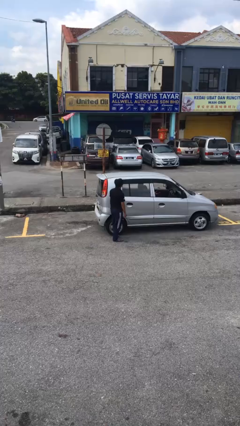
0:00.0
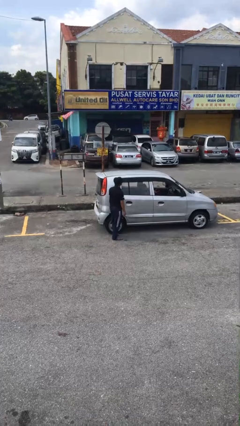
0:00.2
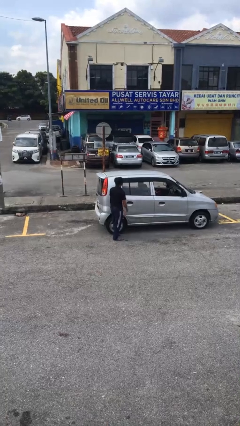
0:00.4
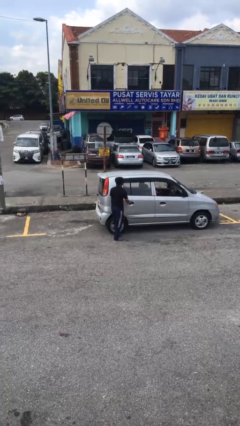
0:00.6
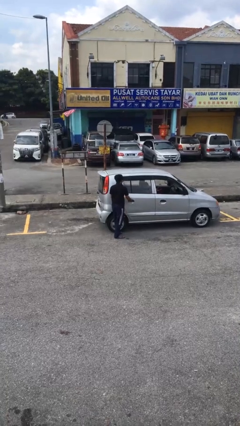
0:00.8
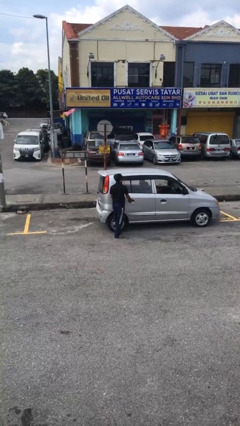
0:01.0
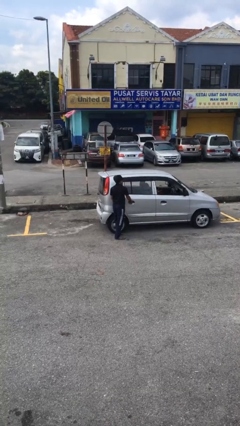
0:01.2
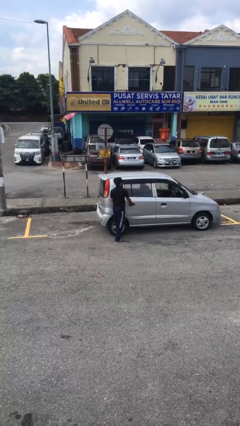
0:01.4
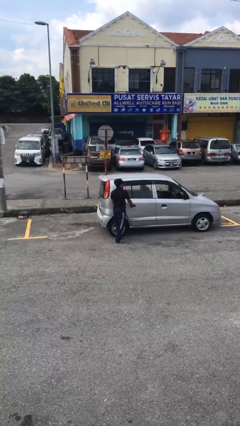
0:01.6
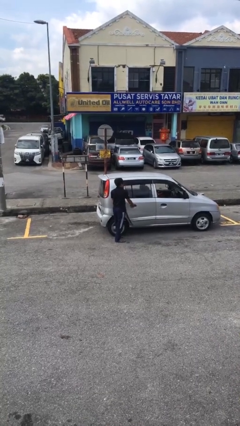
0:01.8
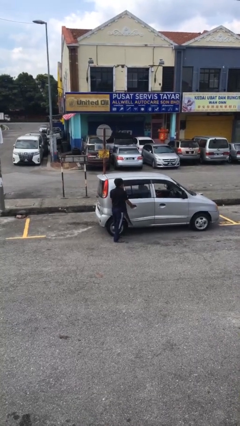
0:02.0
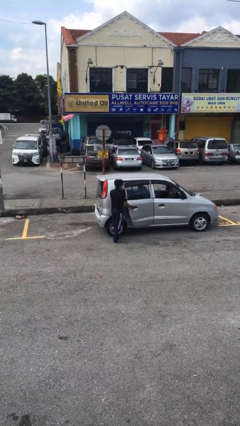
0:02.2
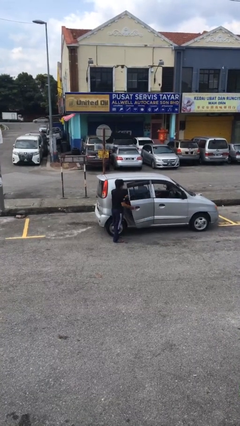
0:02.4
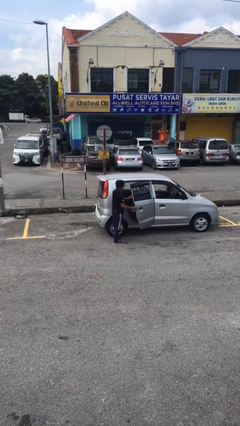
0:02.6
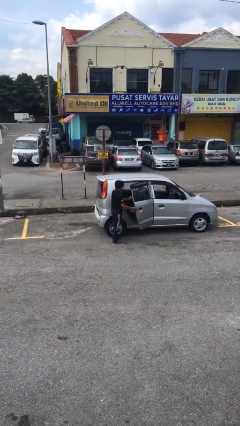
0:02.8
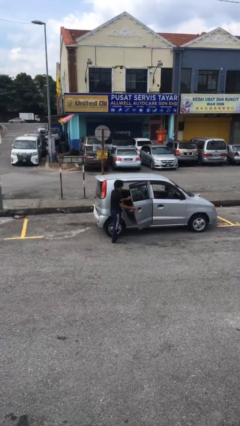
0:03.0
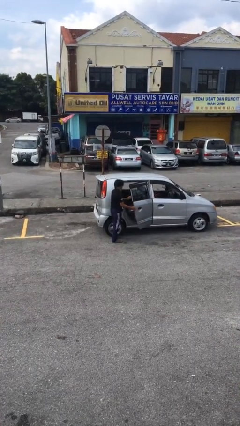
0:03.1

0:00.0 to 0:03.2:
person opens car door

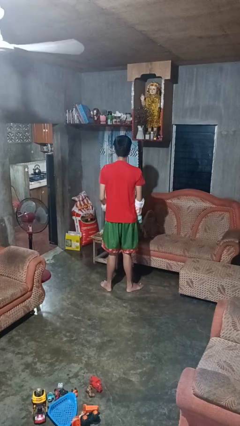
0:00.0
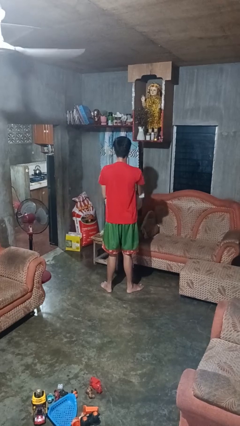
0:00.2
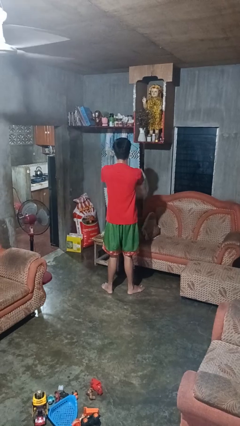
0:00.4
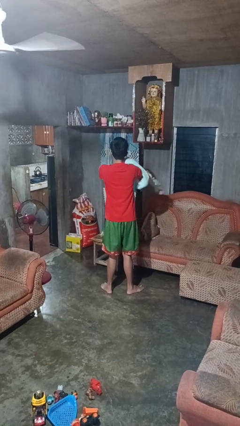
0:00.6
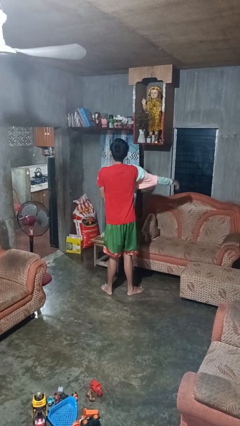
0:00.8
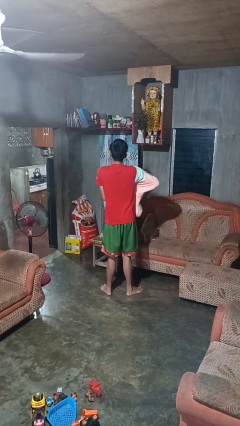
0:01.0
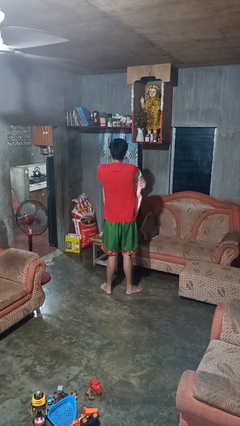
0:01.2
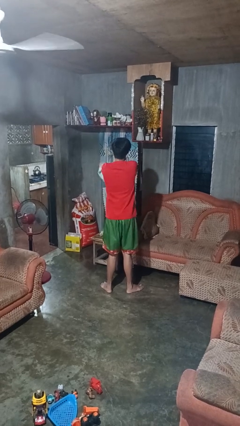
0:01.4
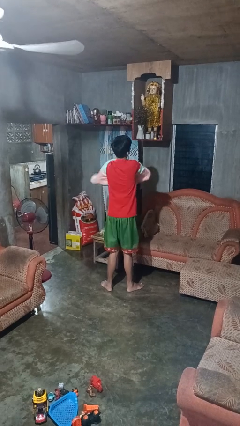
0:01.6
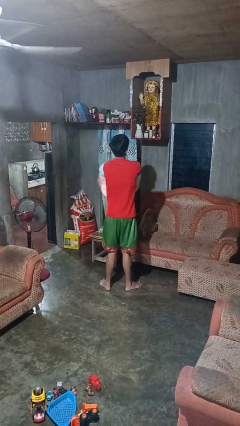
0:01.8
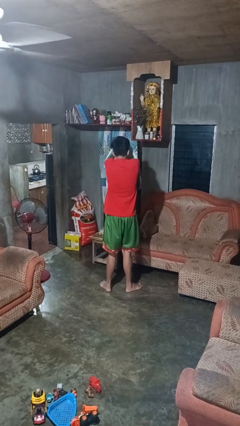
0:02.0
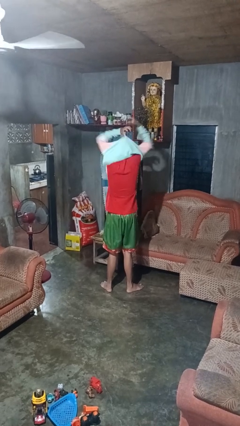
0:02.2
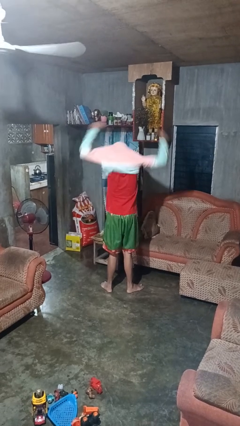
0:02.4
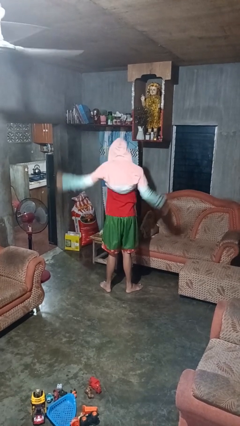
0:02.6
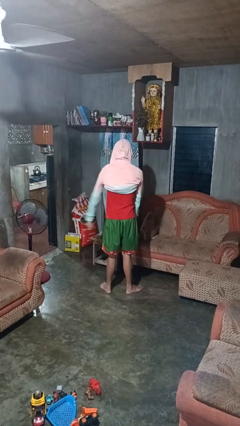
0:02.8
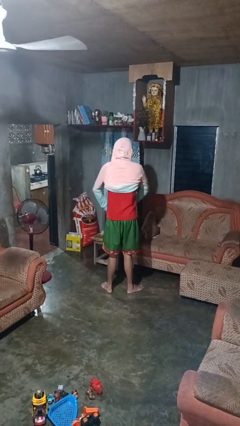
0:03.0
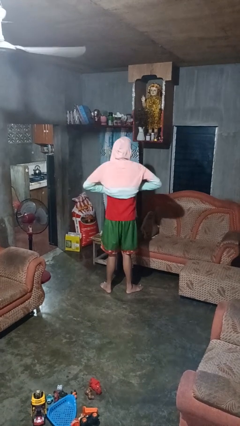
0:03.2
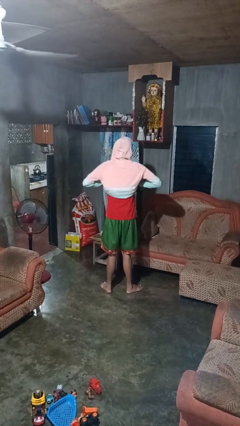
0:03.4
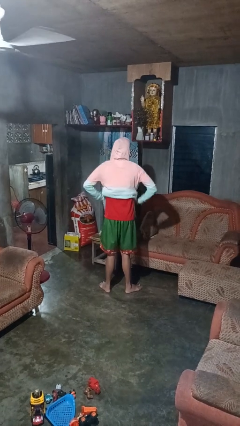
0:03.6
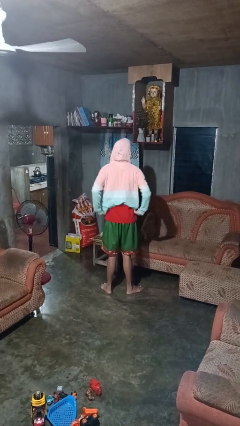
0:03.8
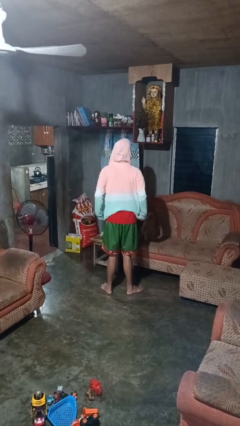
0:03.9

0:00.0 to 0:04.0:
person puts on hoodie

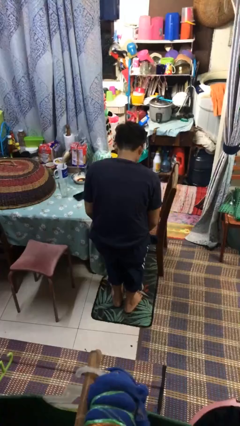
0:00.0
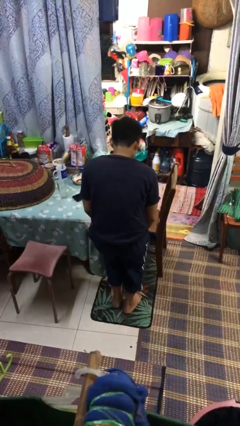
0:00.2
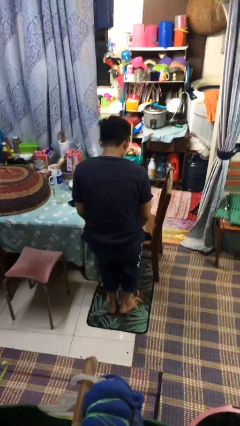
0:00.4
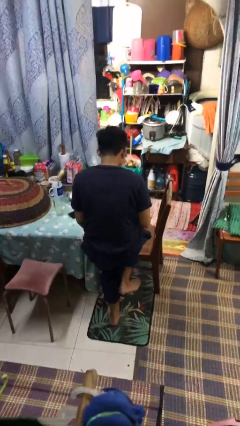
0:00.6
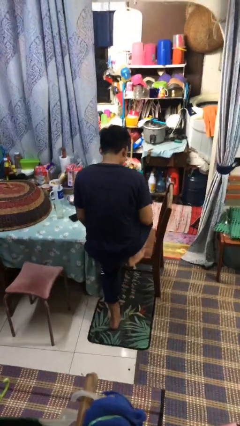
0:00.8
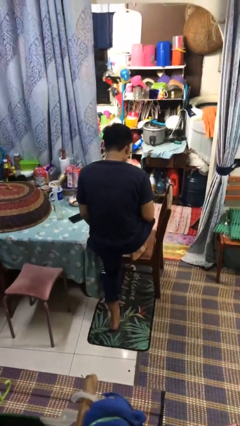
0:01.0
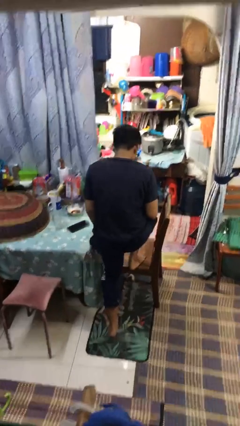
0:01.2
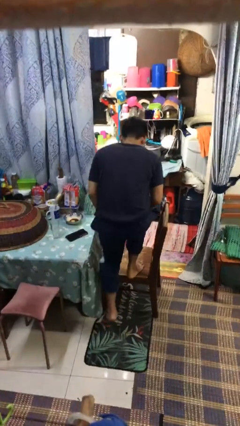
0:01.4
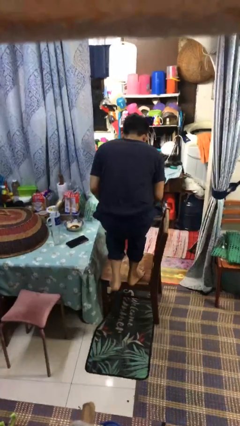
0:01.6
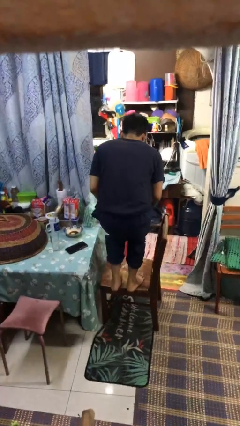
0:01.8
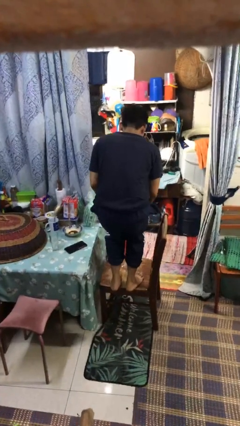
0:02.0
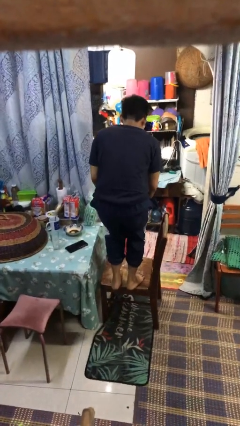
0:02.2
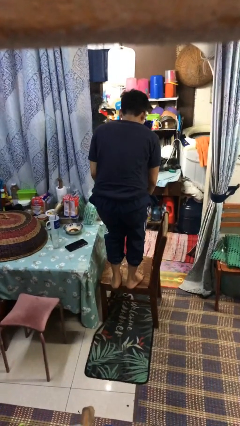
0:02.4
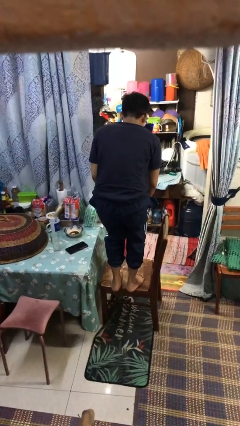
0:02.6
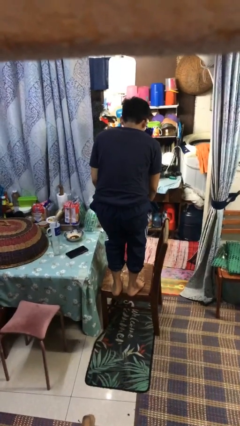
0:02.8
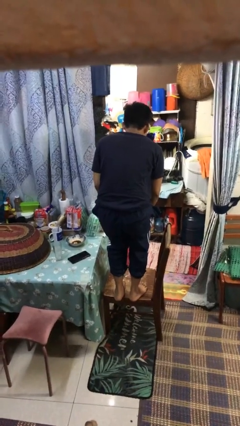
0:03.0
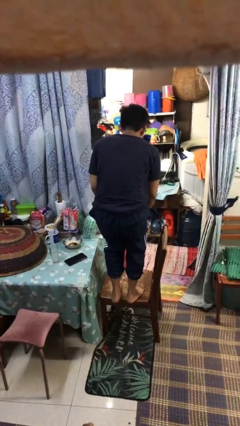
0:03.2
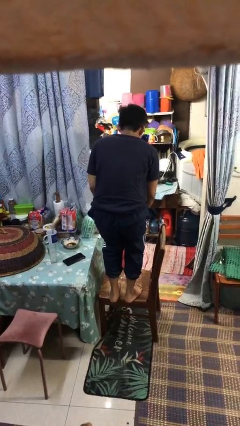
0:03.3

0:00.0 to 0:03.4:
person climbs on chair

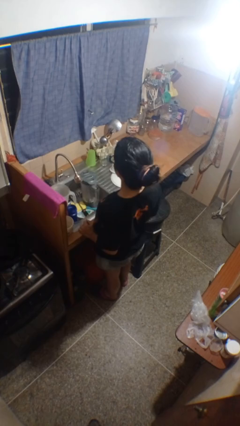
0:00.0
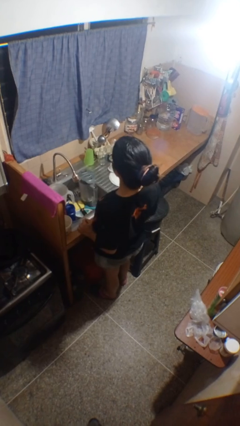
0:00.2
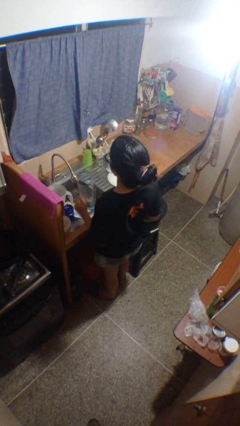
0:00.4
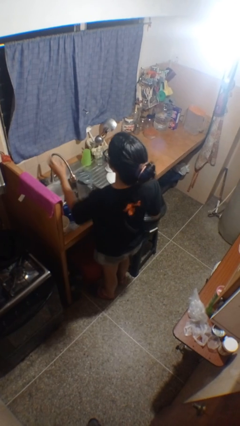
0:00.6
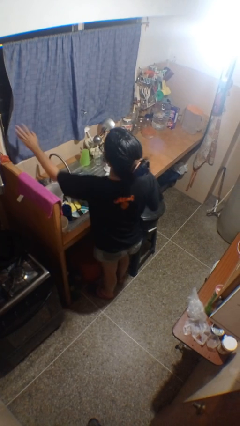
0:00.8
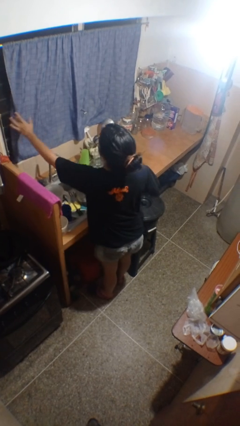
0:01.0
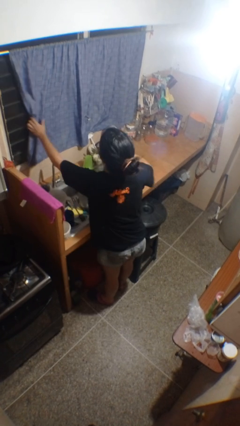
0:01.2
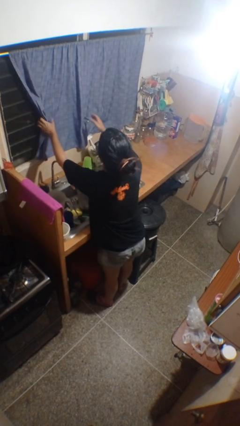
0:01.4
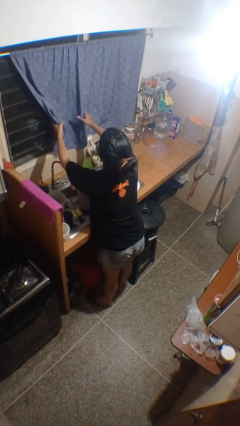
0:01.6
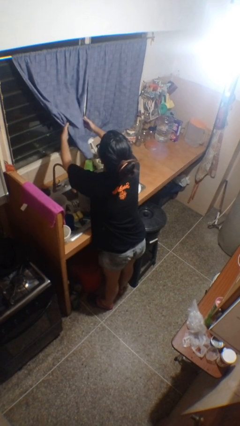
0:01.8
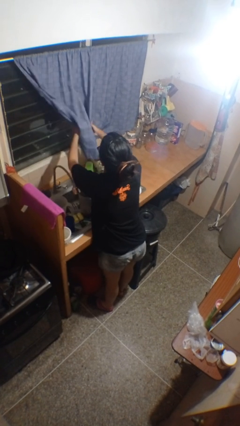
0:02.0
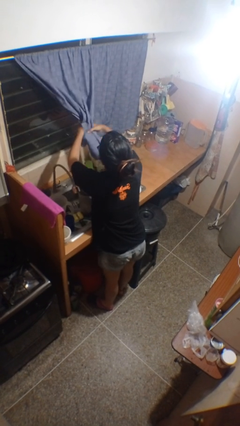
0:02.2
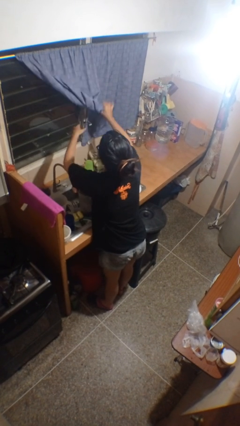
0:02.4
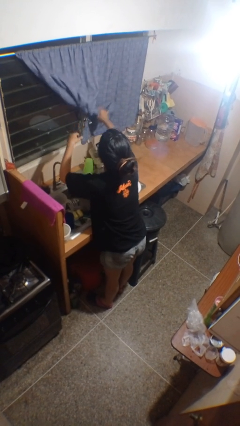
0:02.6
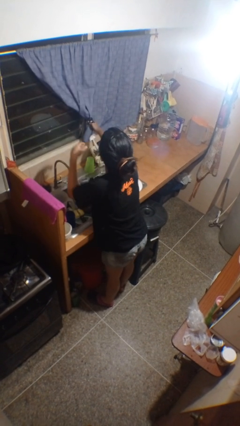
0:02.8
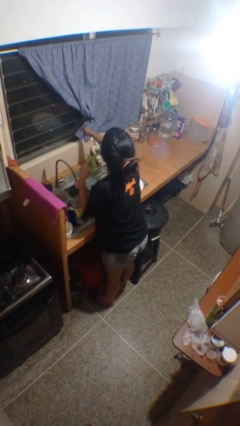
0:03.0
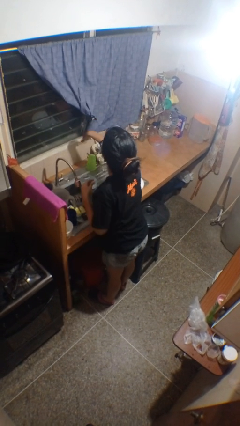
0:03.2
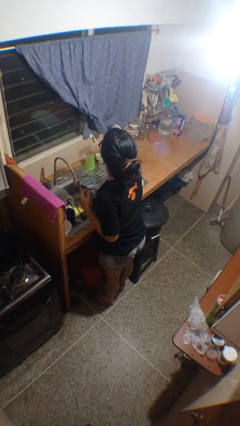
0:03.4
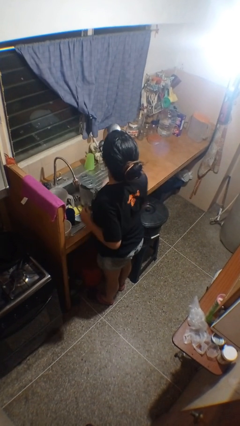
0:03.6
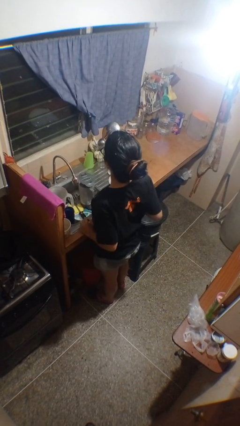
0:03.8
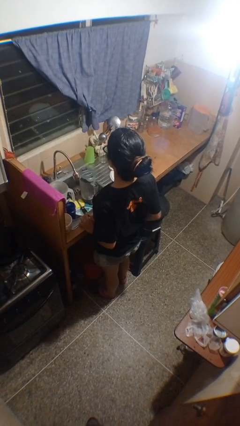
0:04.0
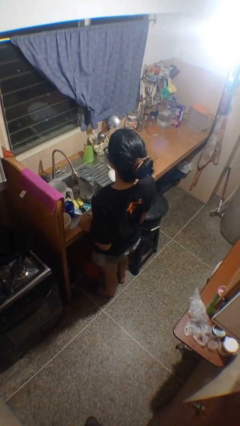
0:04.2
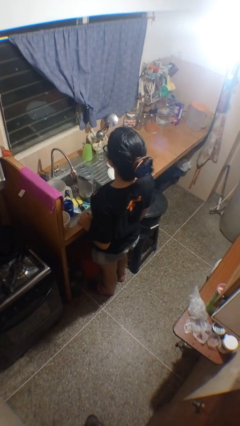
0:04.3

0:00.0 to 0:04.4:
person opens curtains

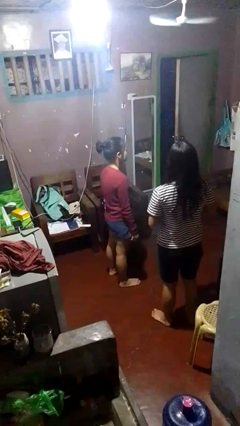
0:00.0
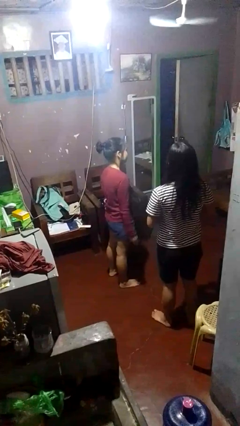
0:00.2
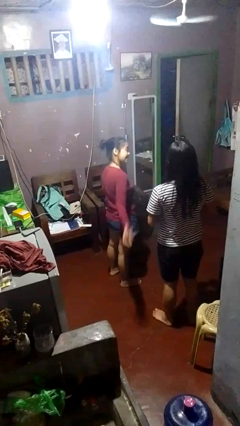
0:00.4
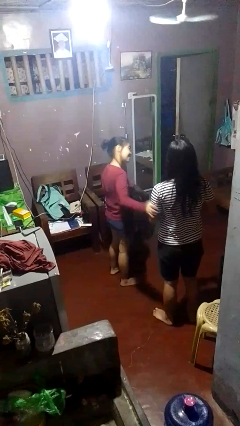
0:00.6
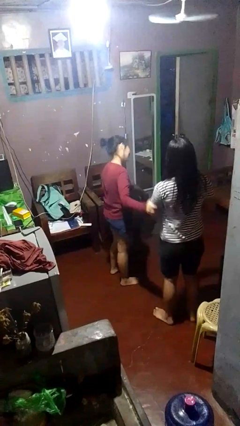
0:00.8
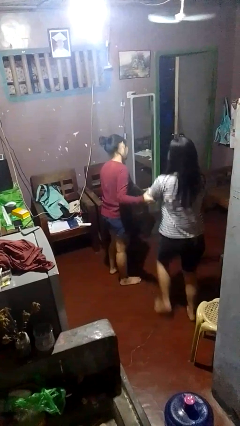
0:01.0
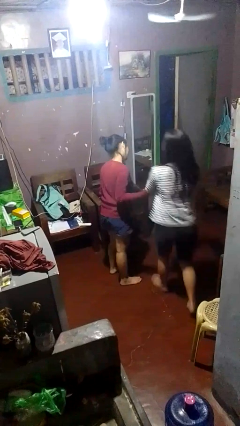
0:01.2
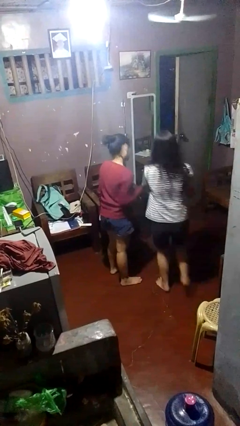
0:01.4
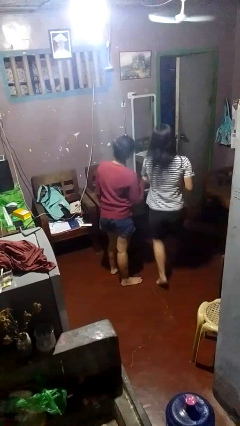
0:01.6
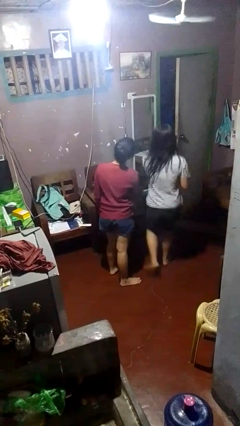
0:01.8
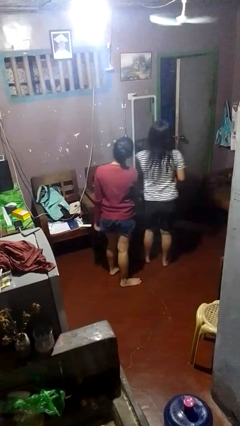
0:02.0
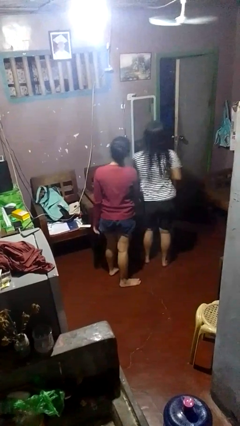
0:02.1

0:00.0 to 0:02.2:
person grabs person by bicep

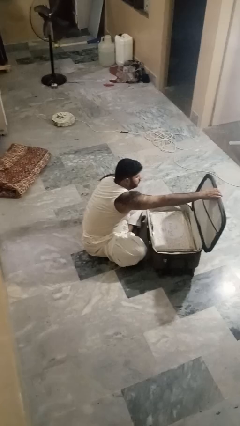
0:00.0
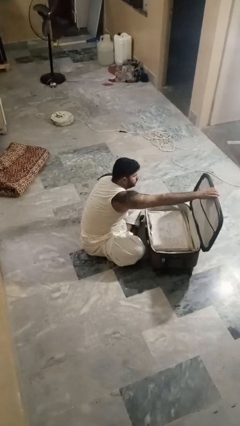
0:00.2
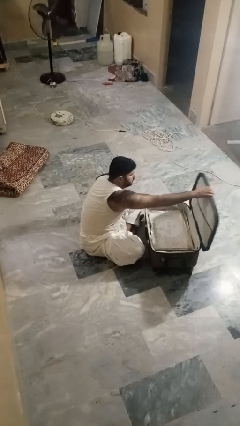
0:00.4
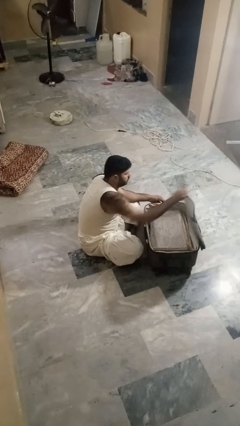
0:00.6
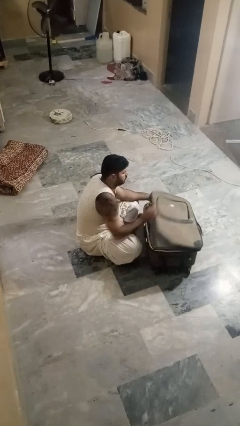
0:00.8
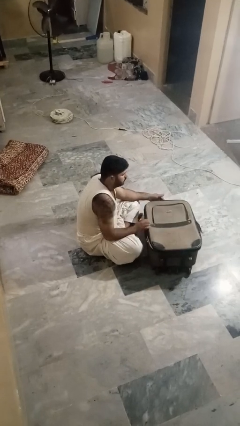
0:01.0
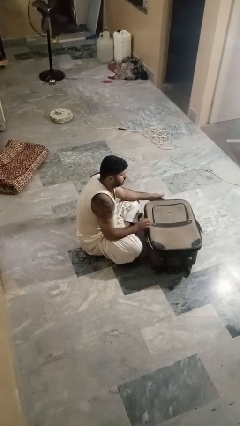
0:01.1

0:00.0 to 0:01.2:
person closes suitcase
